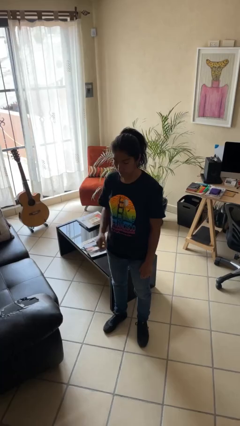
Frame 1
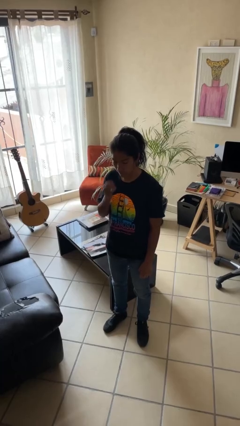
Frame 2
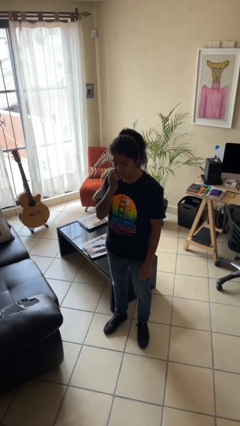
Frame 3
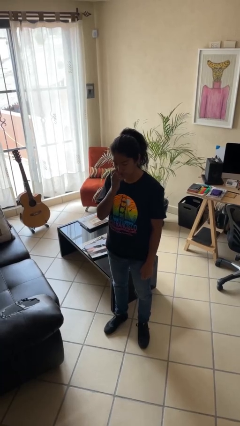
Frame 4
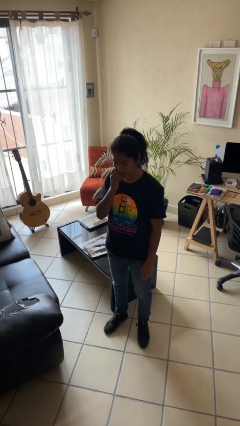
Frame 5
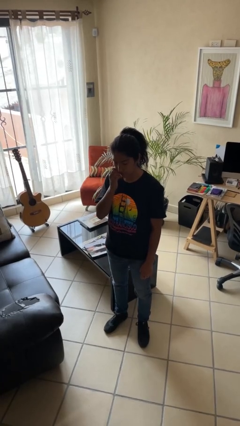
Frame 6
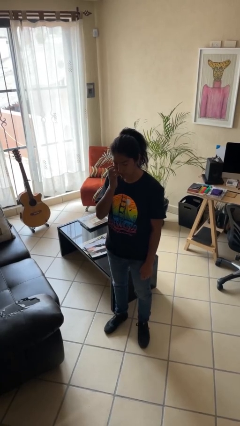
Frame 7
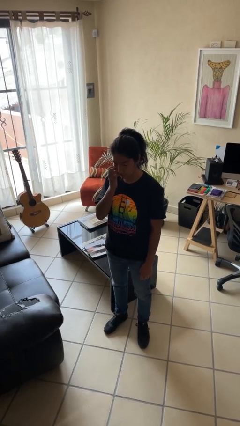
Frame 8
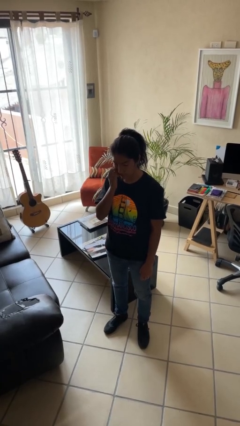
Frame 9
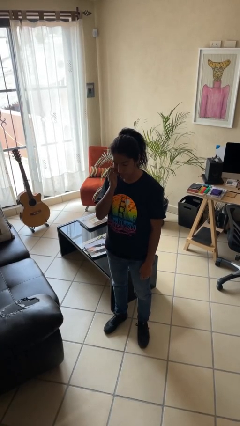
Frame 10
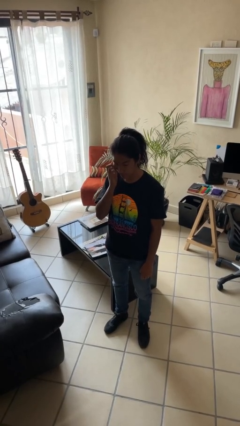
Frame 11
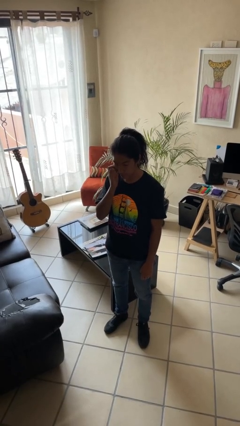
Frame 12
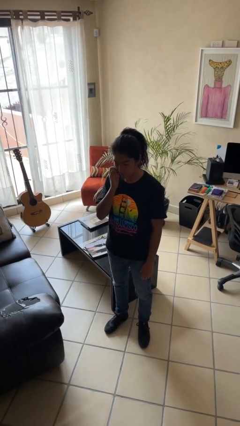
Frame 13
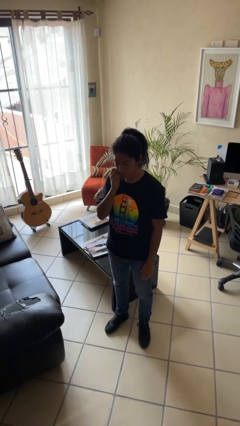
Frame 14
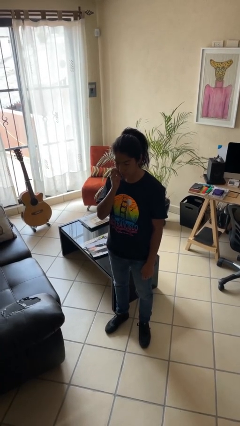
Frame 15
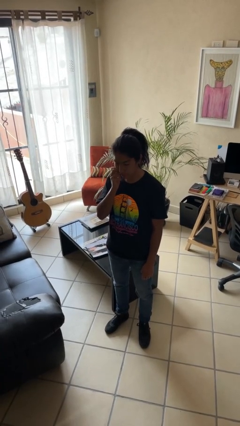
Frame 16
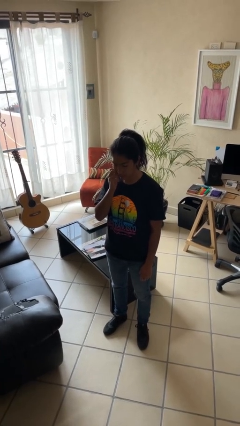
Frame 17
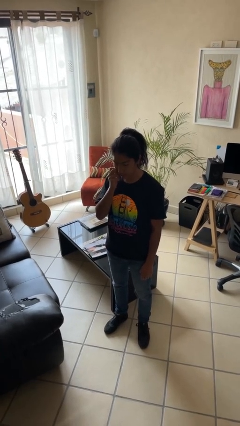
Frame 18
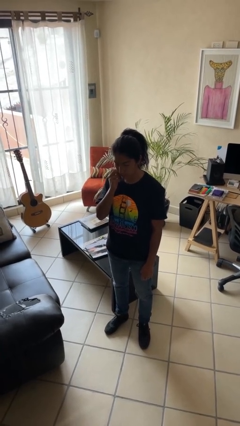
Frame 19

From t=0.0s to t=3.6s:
person scratches face

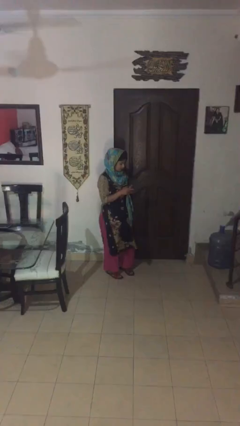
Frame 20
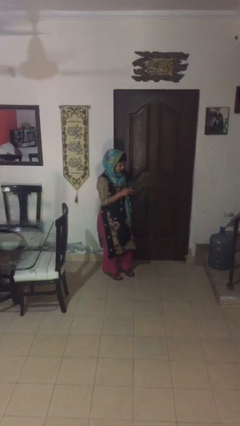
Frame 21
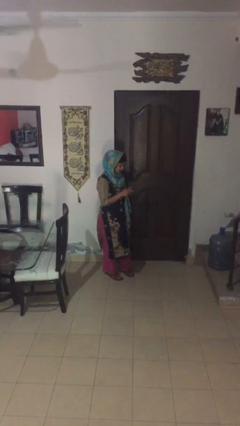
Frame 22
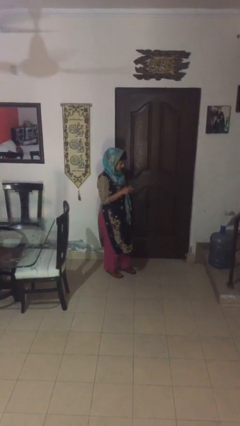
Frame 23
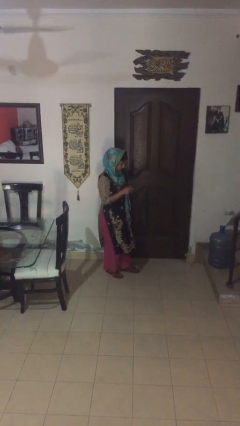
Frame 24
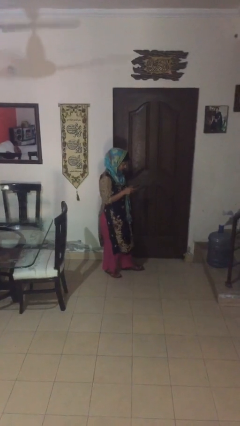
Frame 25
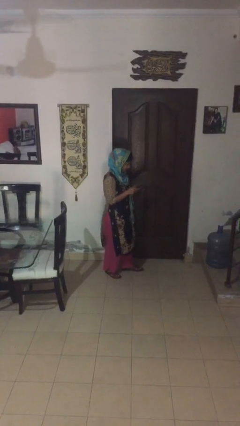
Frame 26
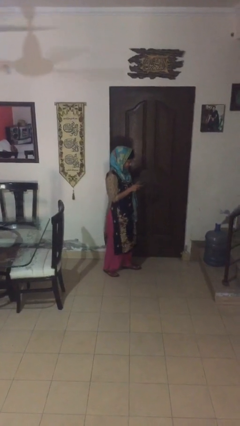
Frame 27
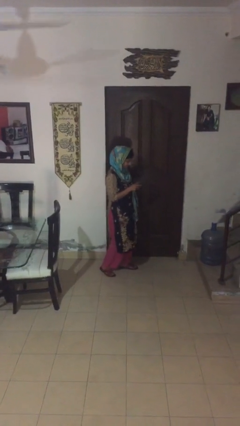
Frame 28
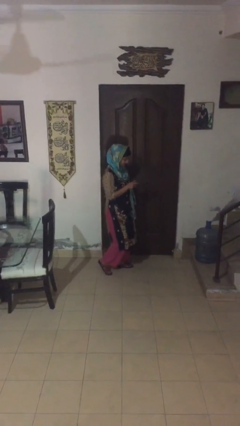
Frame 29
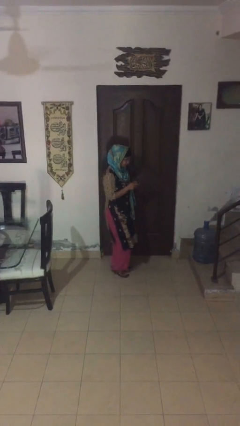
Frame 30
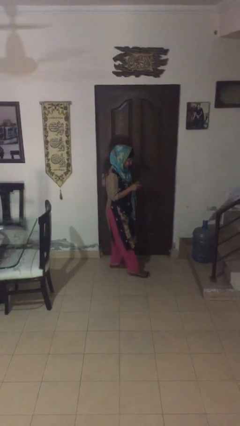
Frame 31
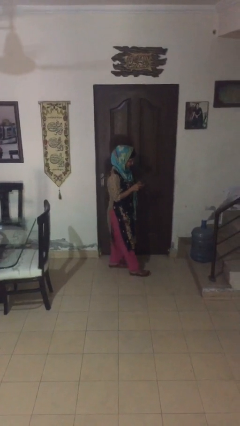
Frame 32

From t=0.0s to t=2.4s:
person texts on phone

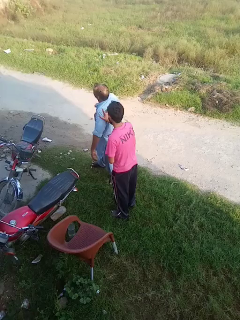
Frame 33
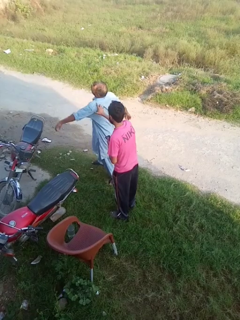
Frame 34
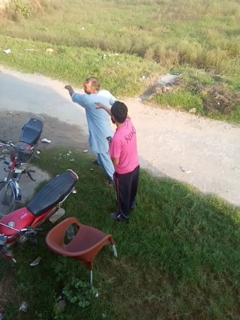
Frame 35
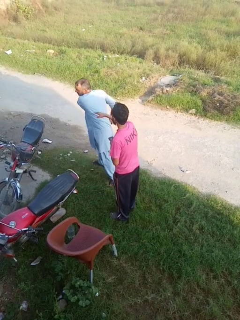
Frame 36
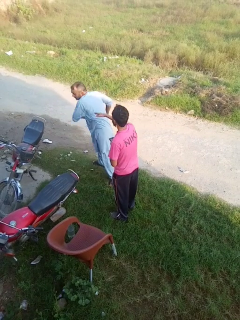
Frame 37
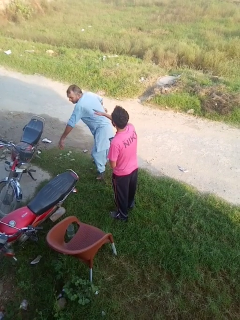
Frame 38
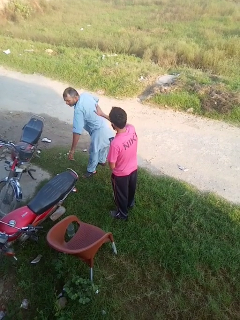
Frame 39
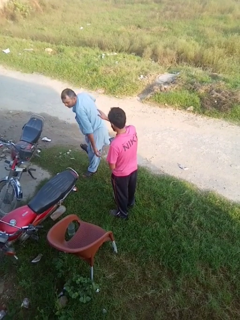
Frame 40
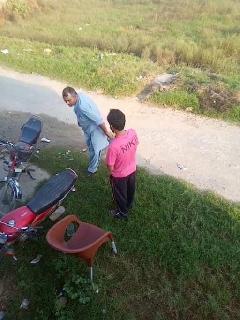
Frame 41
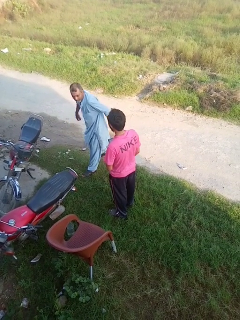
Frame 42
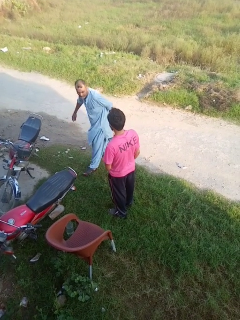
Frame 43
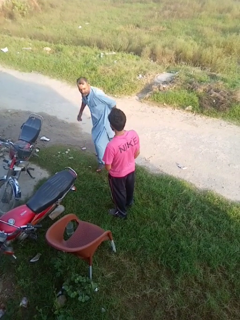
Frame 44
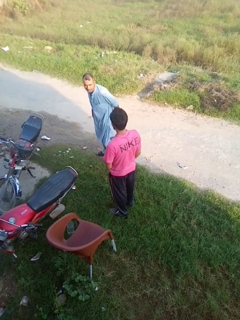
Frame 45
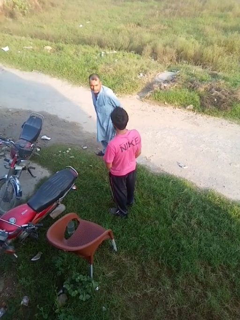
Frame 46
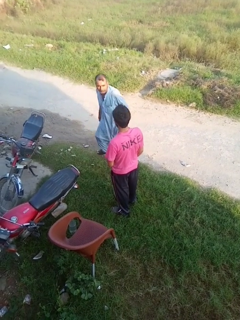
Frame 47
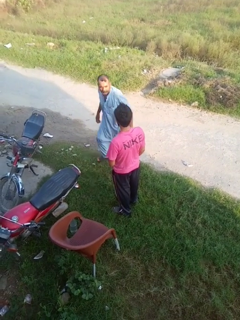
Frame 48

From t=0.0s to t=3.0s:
person shoves person

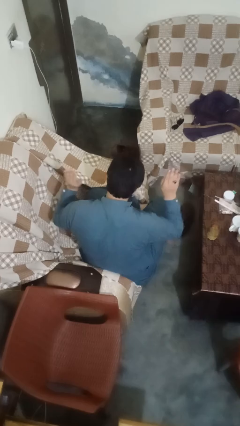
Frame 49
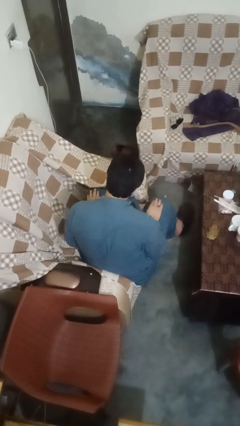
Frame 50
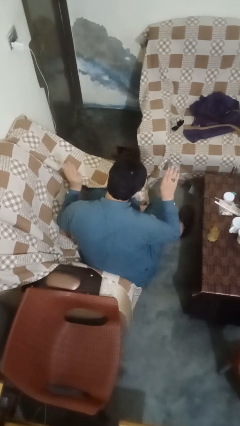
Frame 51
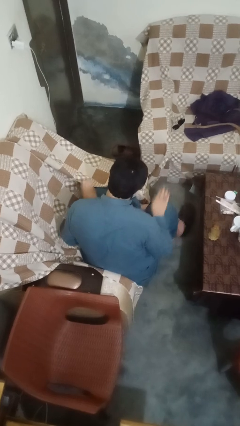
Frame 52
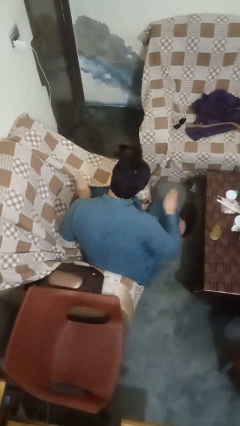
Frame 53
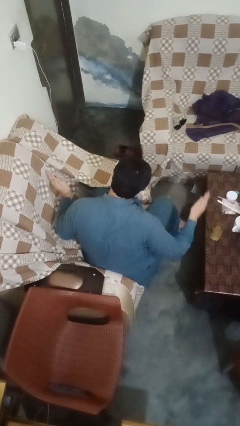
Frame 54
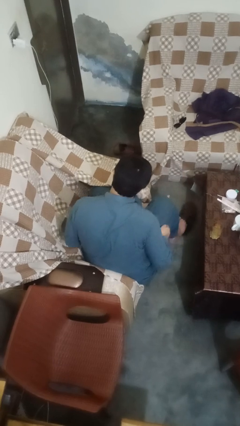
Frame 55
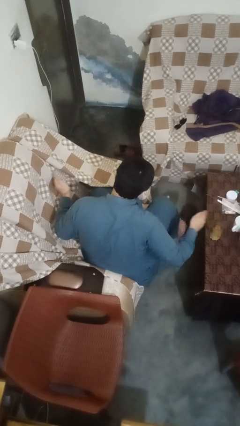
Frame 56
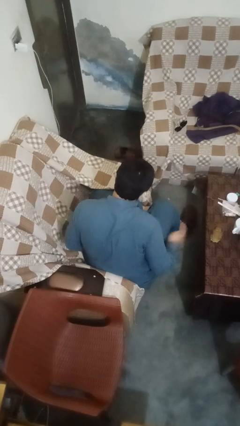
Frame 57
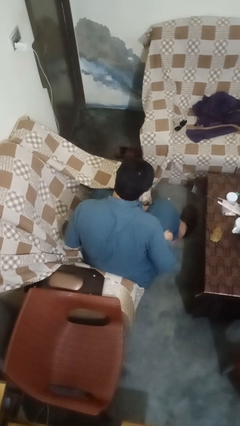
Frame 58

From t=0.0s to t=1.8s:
person slaps hands on thighs

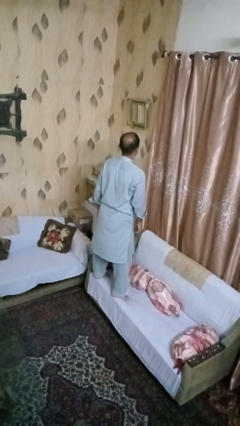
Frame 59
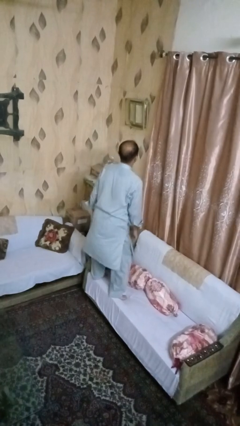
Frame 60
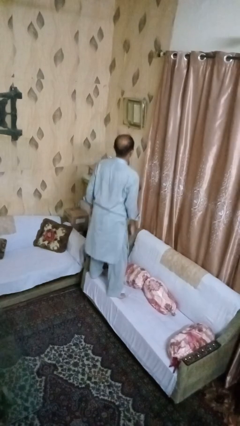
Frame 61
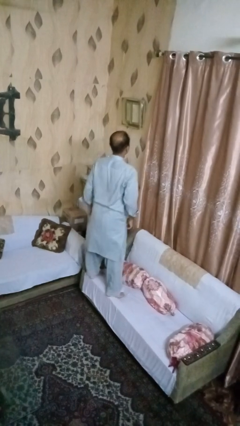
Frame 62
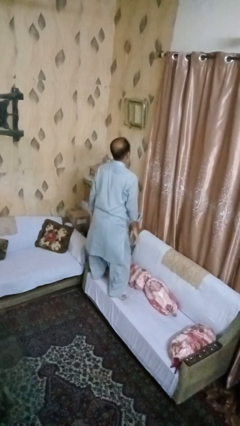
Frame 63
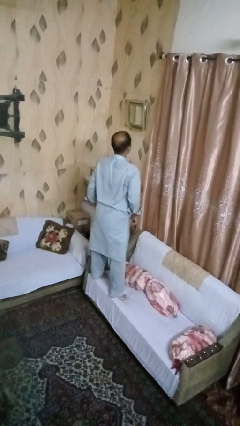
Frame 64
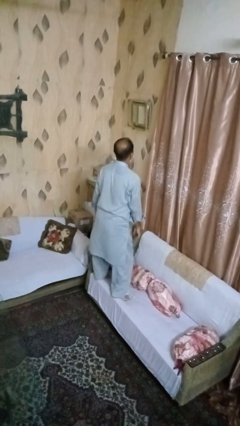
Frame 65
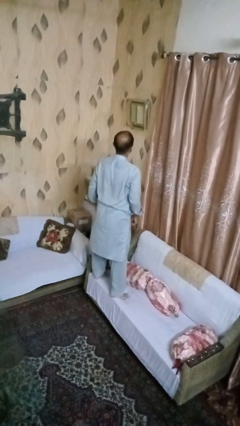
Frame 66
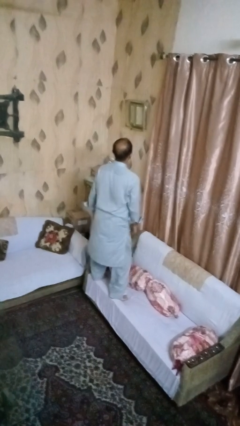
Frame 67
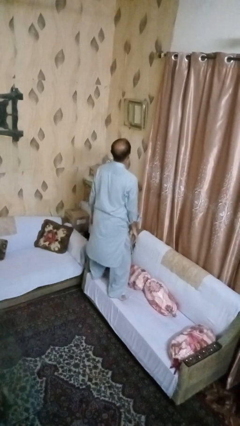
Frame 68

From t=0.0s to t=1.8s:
person jumps on couch

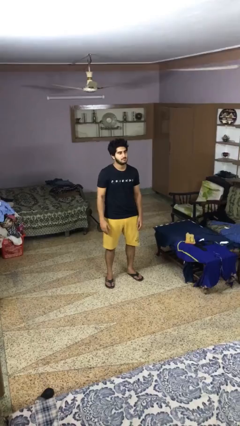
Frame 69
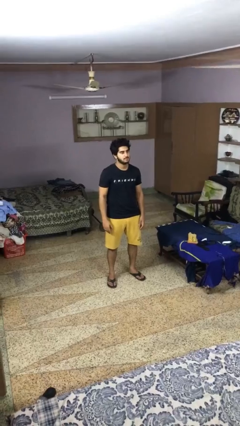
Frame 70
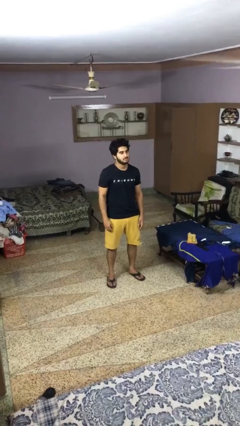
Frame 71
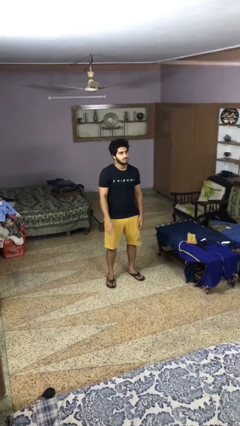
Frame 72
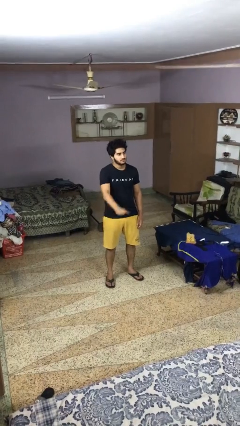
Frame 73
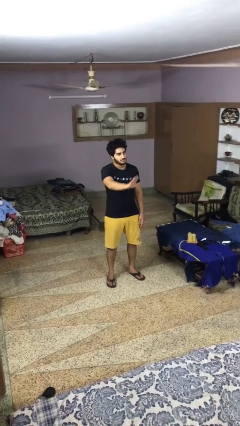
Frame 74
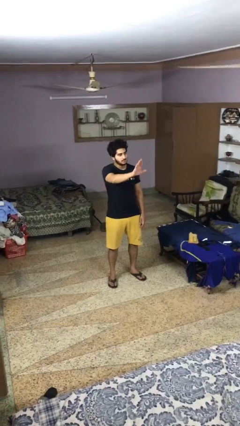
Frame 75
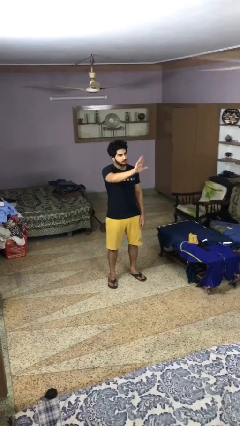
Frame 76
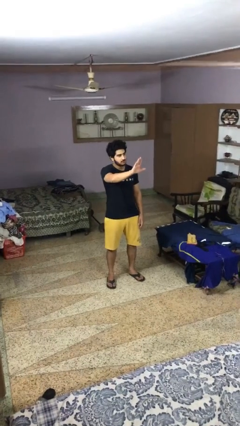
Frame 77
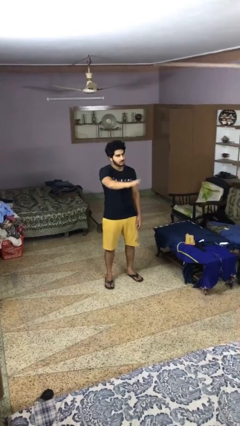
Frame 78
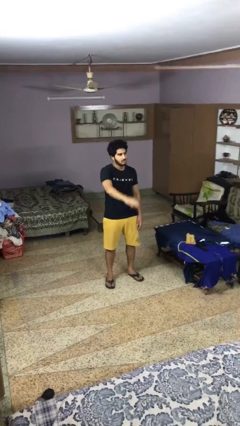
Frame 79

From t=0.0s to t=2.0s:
person gestures stop

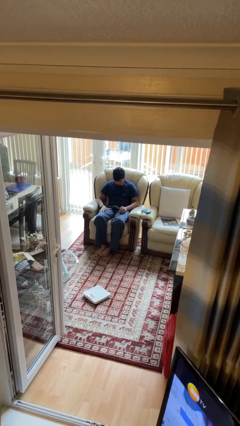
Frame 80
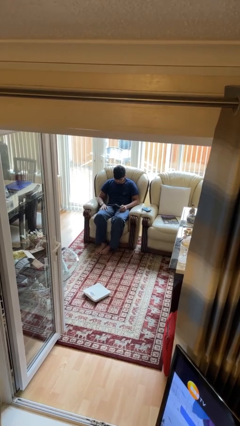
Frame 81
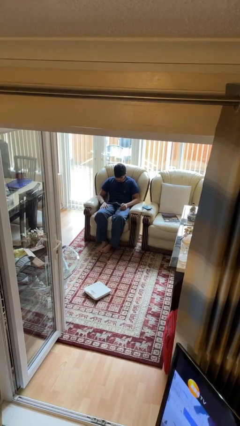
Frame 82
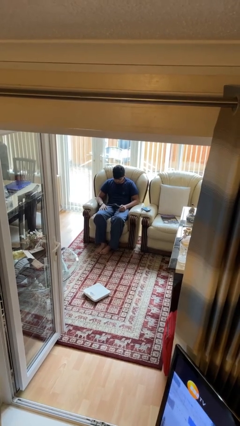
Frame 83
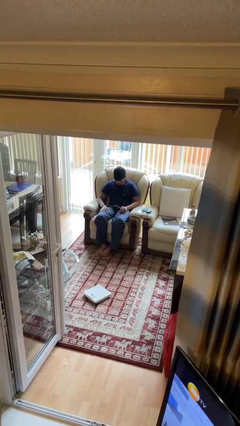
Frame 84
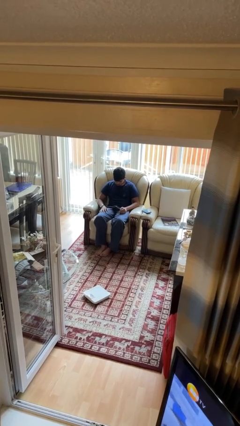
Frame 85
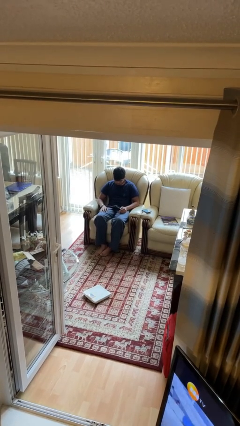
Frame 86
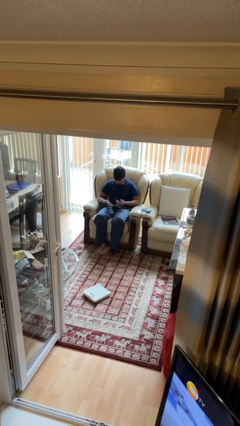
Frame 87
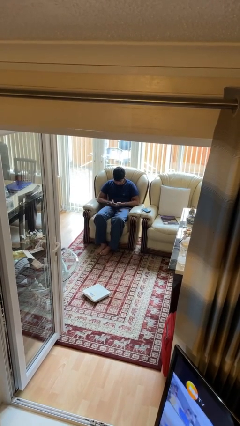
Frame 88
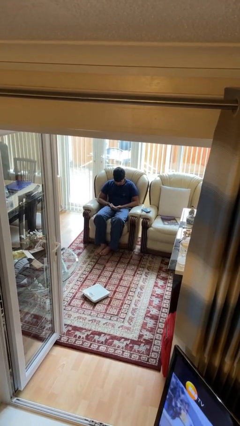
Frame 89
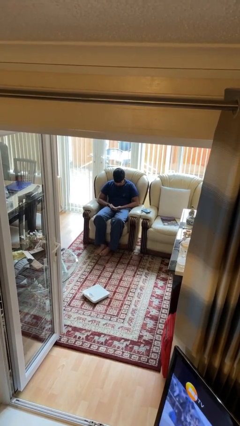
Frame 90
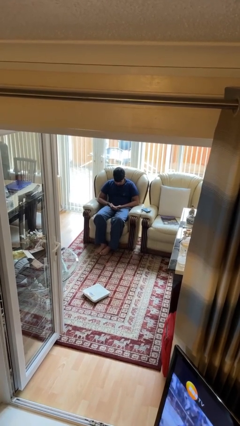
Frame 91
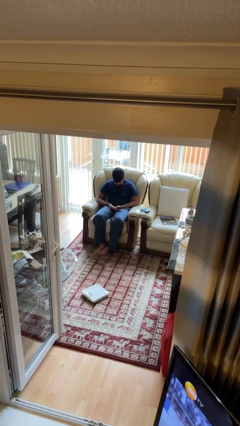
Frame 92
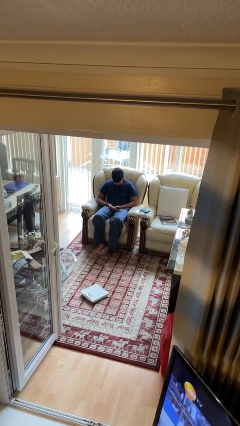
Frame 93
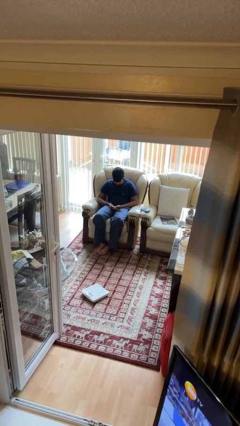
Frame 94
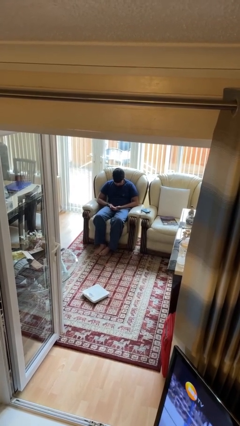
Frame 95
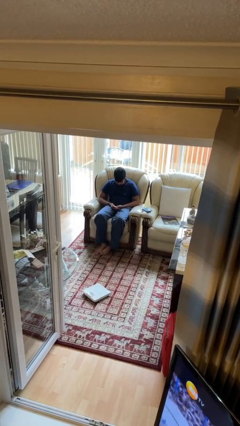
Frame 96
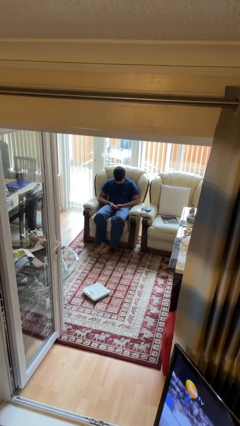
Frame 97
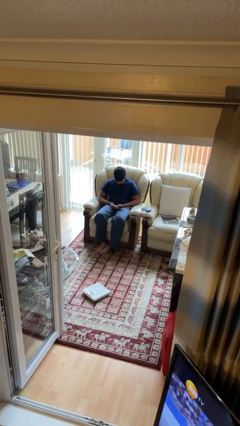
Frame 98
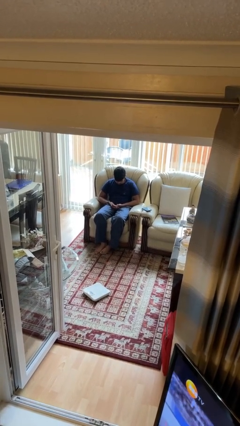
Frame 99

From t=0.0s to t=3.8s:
person looks at hands in lap
